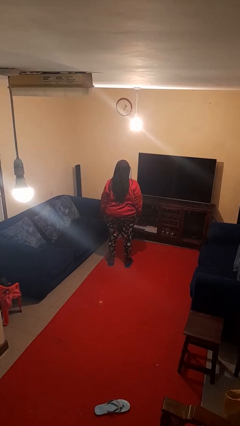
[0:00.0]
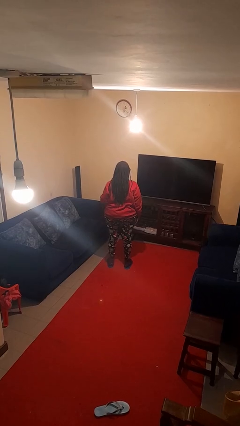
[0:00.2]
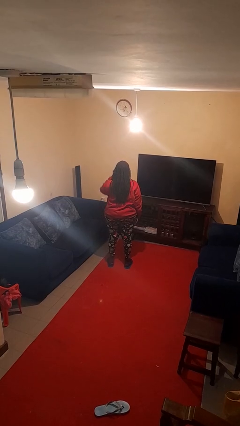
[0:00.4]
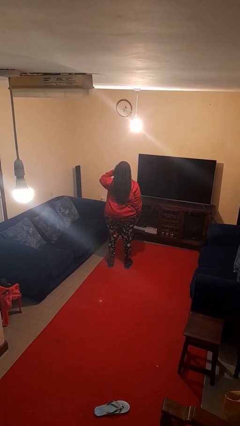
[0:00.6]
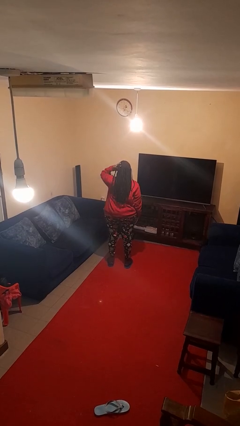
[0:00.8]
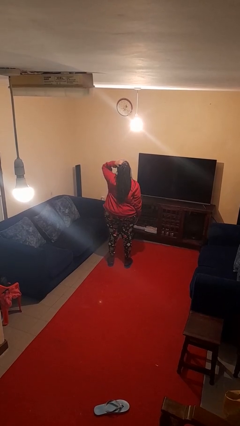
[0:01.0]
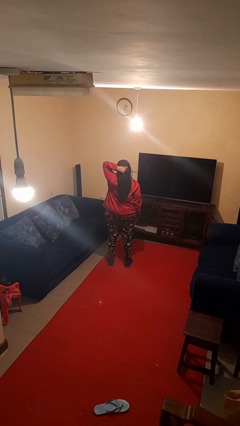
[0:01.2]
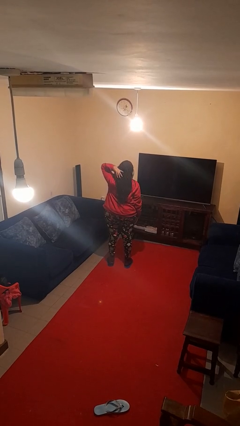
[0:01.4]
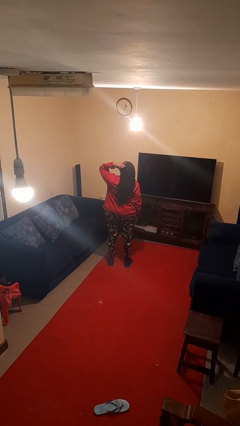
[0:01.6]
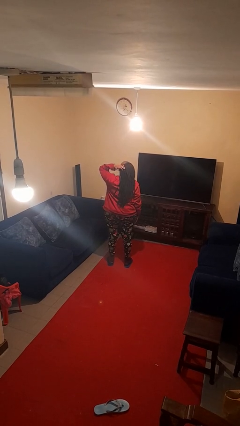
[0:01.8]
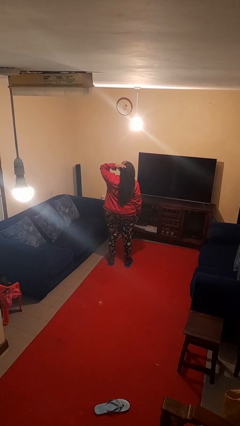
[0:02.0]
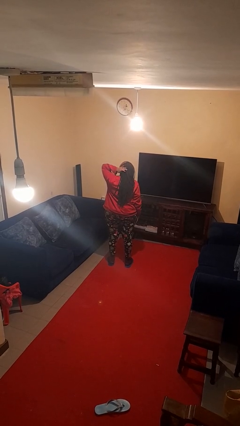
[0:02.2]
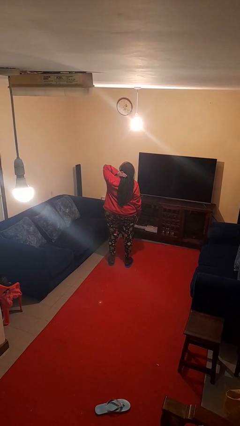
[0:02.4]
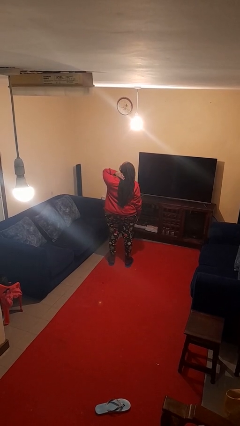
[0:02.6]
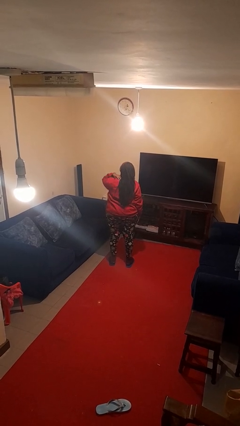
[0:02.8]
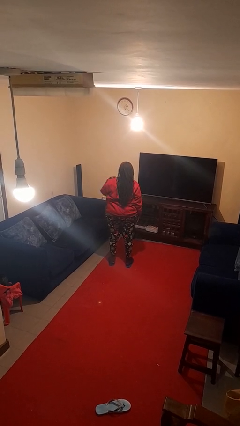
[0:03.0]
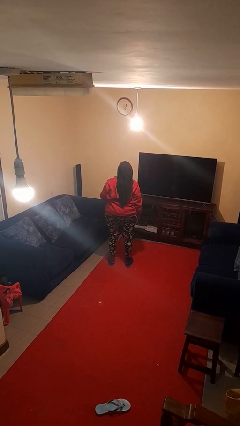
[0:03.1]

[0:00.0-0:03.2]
person strokes hair

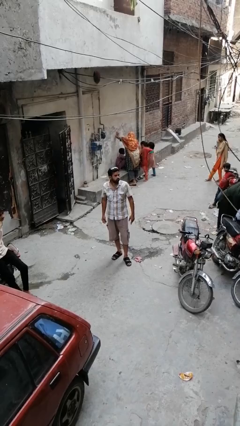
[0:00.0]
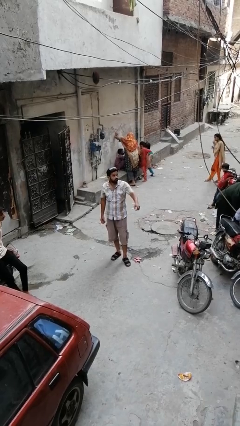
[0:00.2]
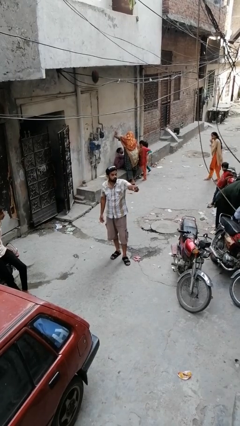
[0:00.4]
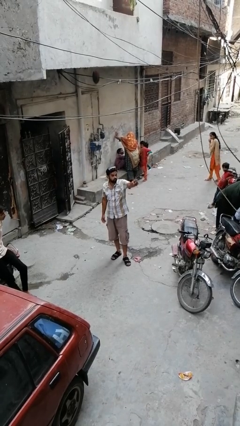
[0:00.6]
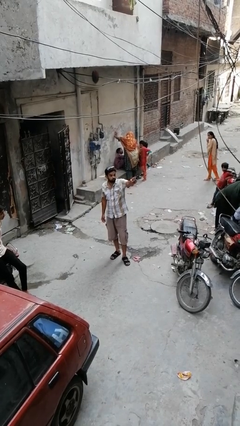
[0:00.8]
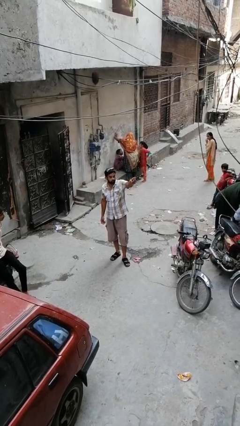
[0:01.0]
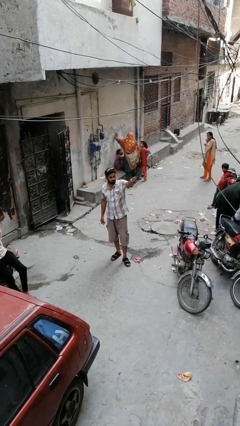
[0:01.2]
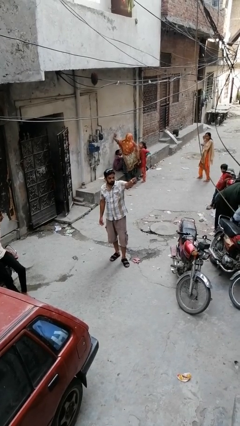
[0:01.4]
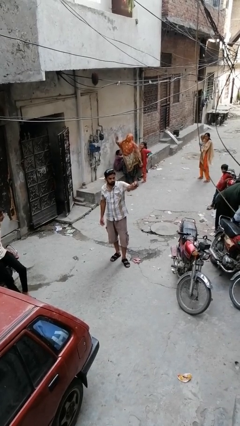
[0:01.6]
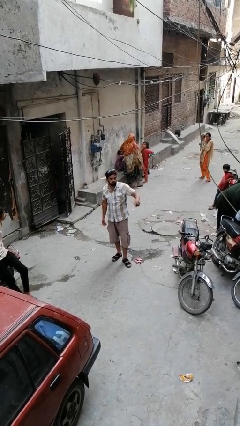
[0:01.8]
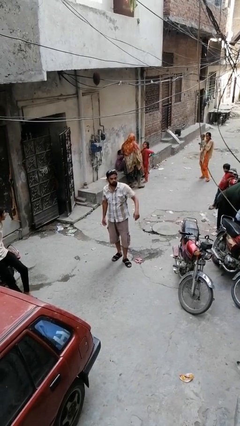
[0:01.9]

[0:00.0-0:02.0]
person points at person

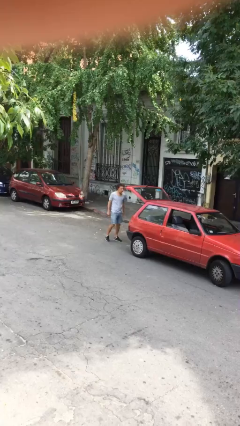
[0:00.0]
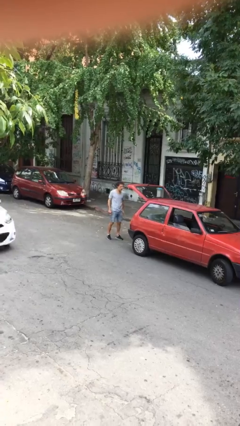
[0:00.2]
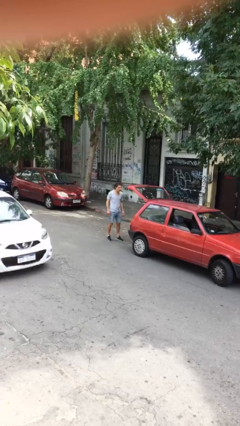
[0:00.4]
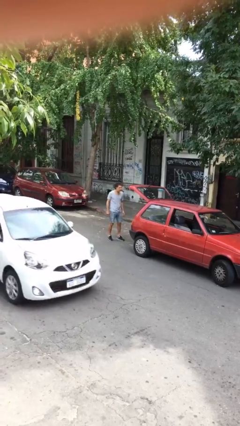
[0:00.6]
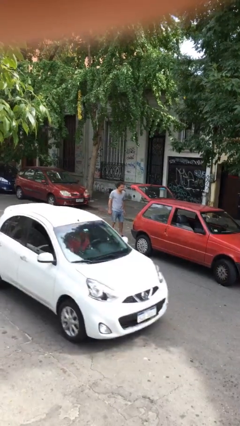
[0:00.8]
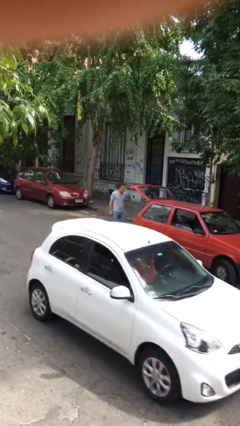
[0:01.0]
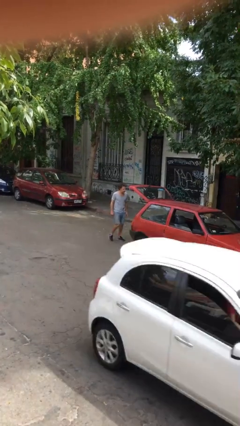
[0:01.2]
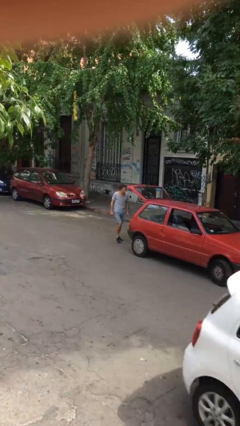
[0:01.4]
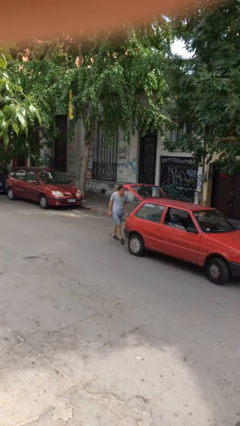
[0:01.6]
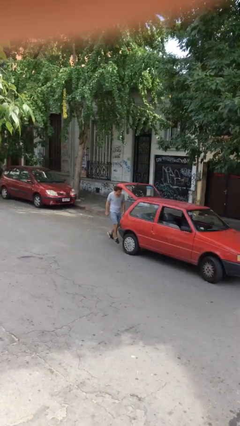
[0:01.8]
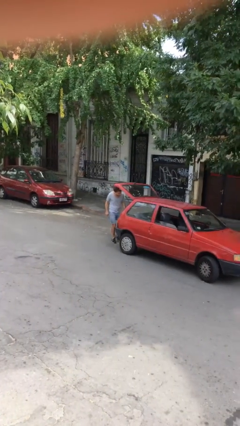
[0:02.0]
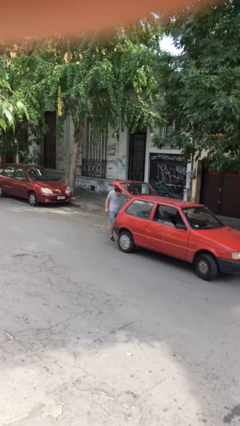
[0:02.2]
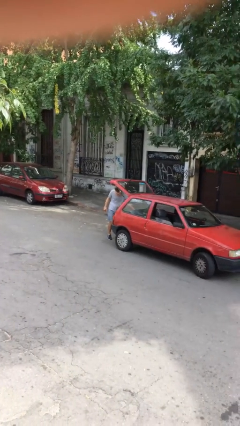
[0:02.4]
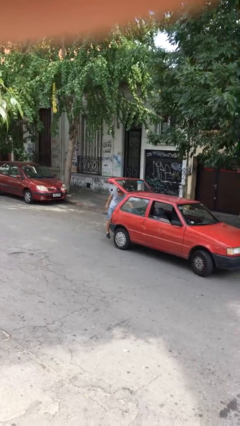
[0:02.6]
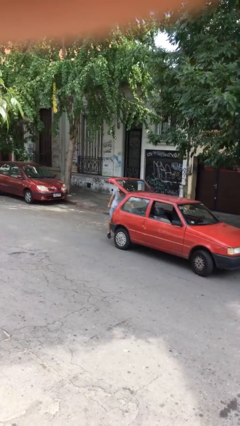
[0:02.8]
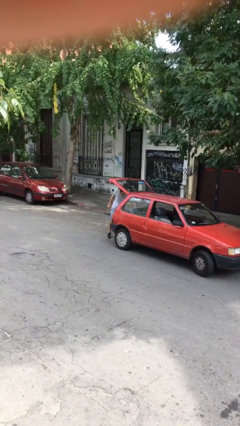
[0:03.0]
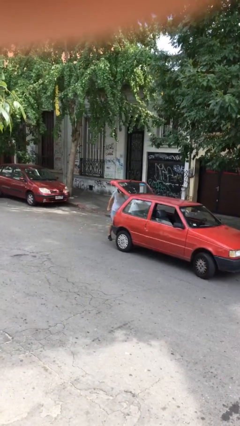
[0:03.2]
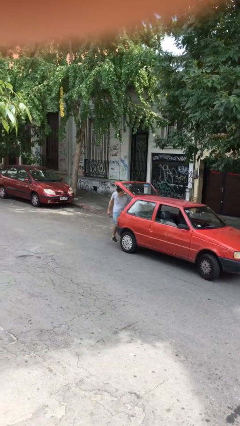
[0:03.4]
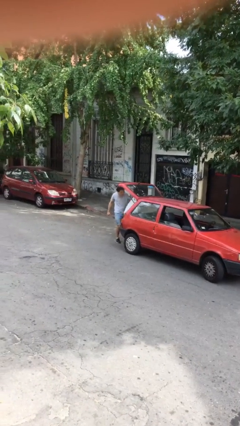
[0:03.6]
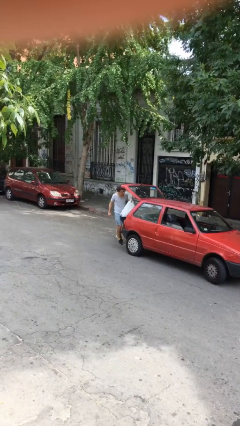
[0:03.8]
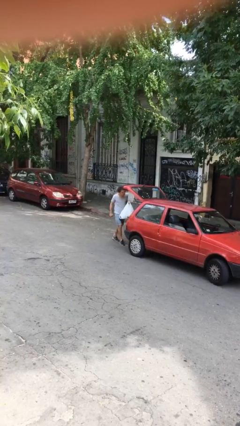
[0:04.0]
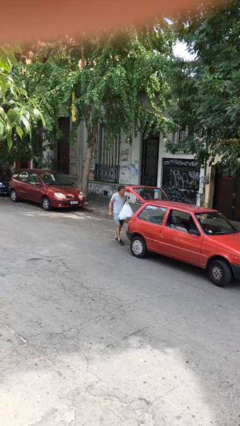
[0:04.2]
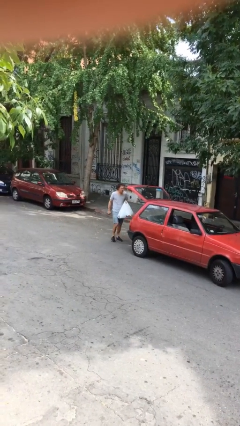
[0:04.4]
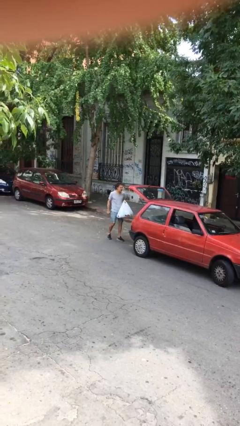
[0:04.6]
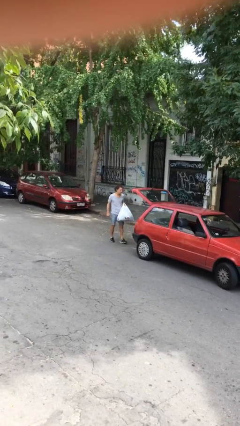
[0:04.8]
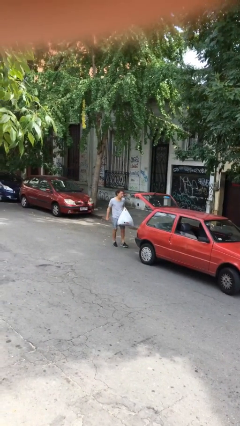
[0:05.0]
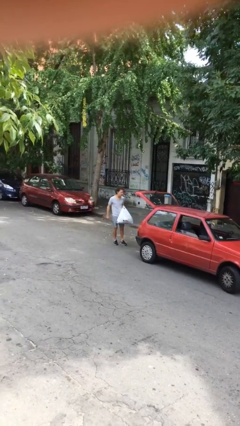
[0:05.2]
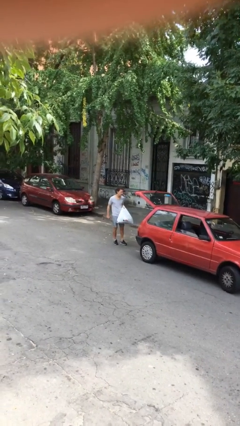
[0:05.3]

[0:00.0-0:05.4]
person unloads car

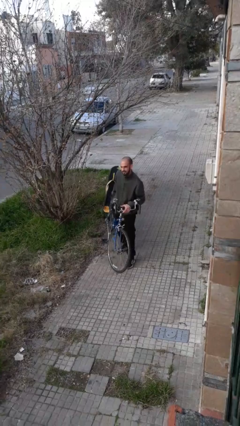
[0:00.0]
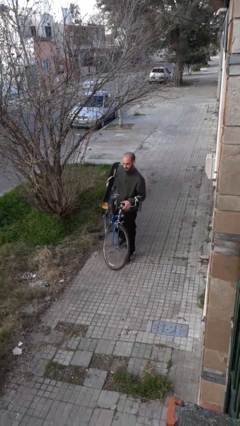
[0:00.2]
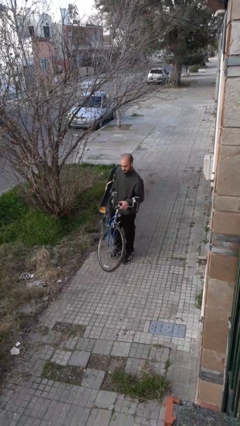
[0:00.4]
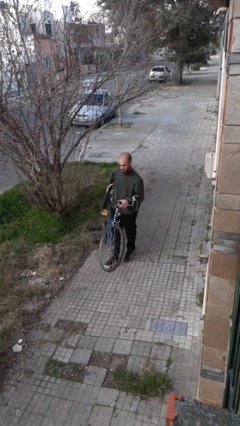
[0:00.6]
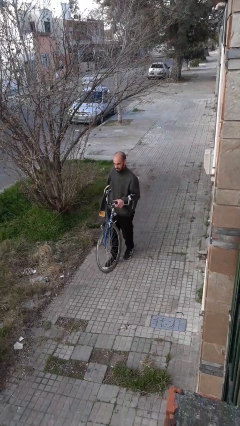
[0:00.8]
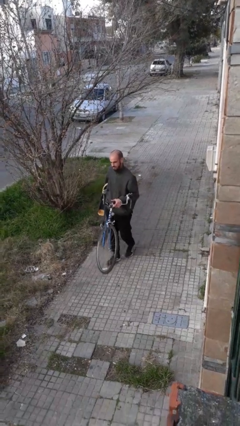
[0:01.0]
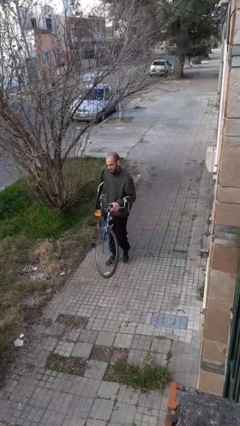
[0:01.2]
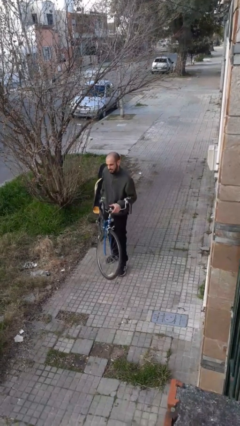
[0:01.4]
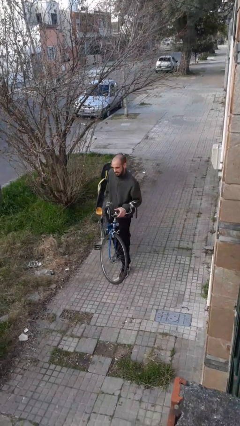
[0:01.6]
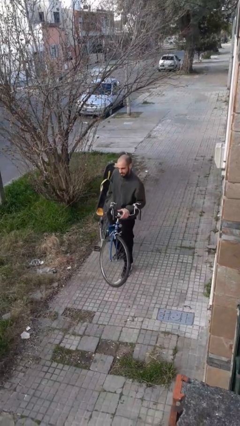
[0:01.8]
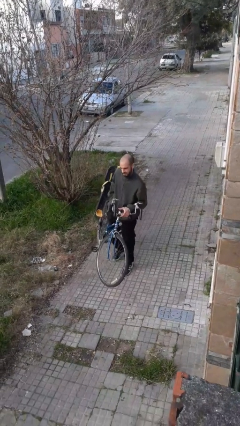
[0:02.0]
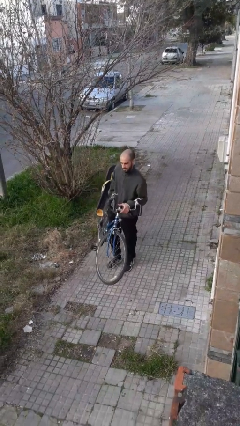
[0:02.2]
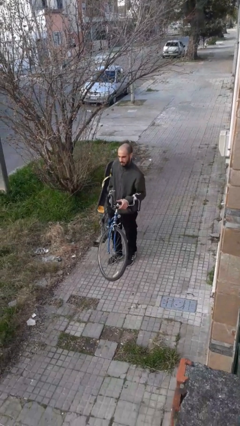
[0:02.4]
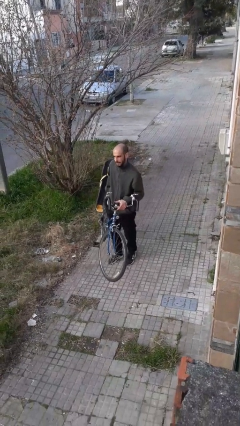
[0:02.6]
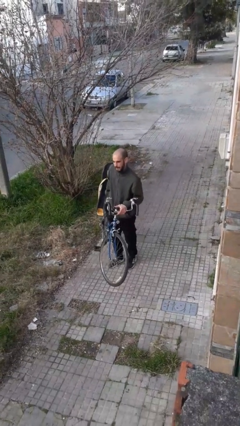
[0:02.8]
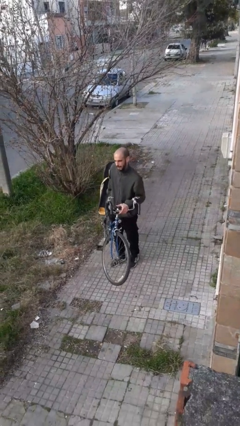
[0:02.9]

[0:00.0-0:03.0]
person carries bicycle

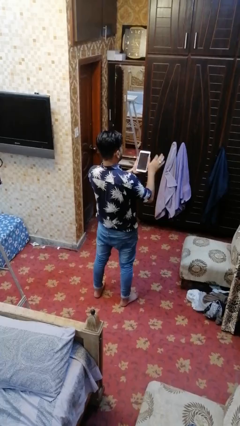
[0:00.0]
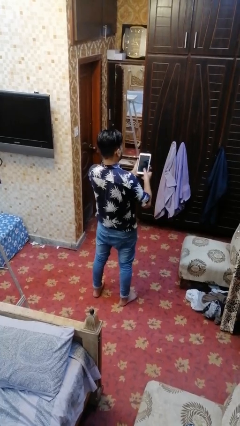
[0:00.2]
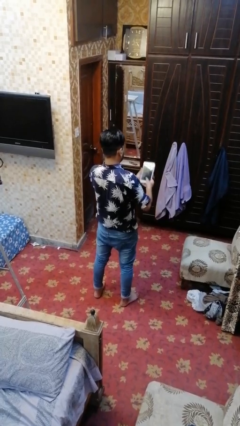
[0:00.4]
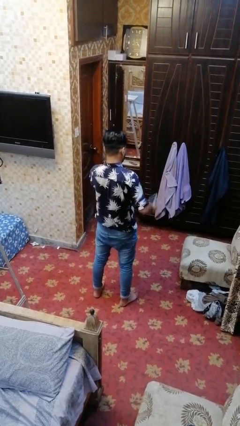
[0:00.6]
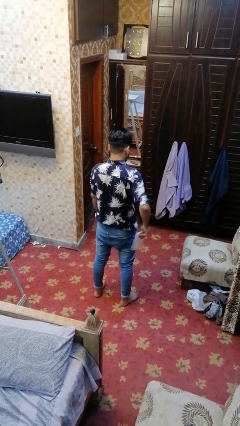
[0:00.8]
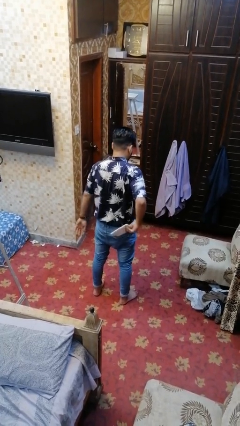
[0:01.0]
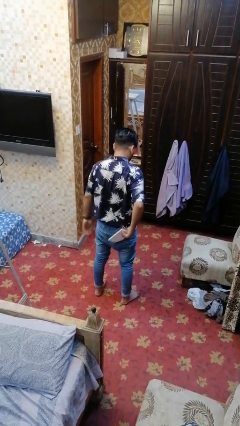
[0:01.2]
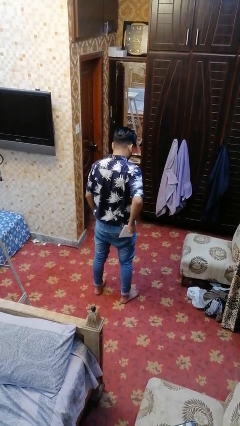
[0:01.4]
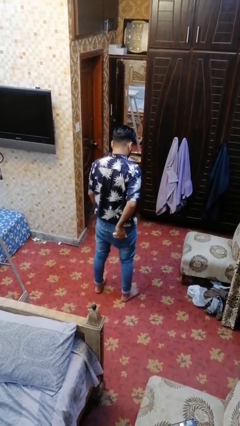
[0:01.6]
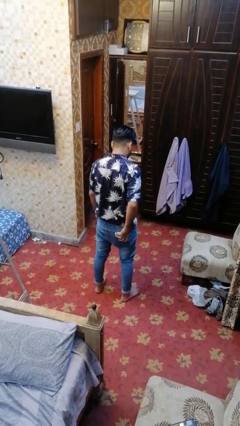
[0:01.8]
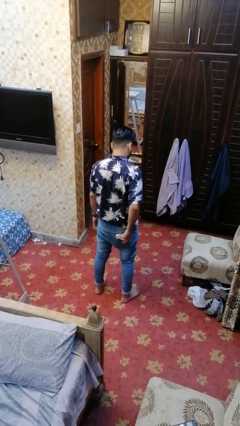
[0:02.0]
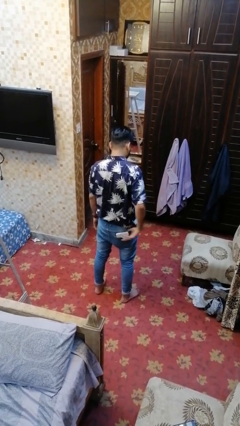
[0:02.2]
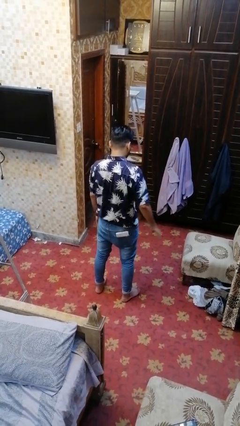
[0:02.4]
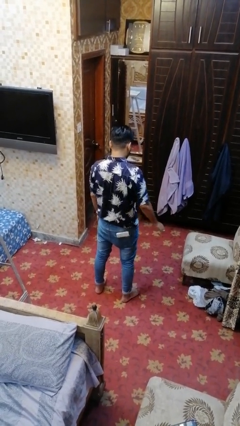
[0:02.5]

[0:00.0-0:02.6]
person puts phone into pocket

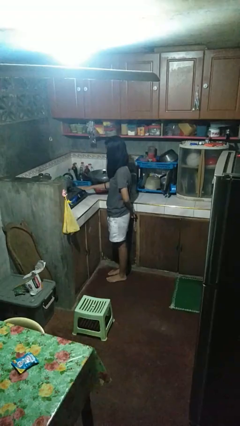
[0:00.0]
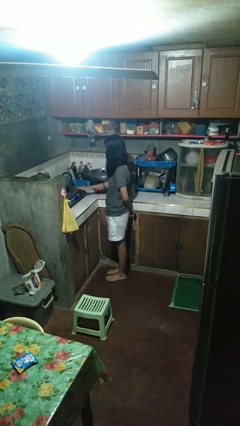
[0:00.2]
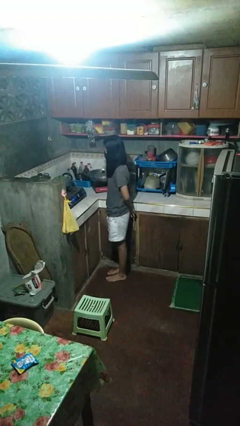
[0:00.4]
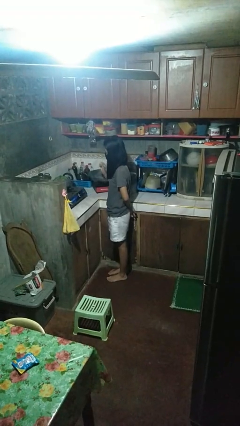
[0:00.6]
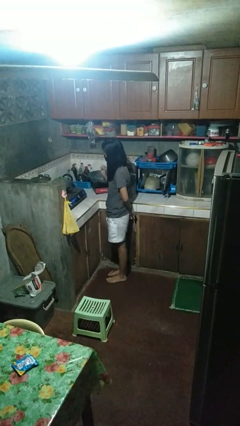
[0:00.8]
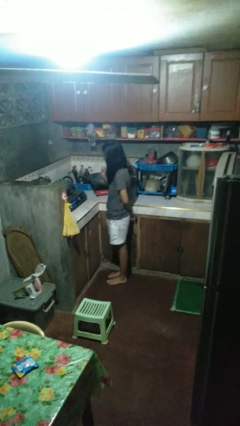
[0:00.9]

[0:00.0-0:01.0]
person burns hand

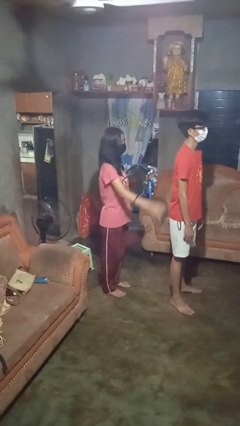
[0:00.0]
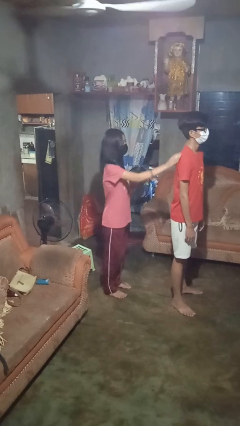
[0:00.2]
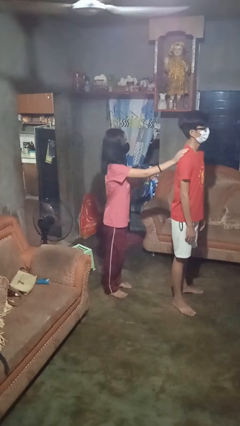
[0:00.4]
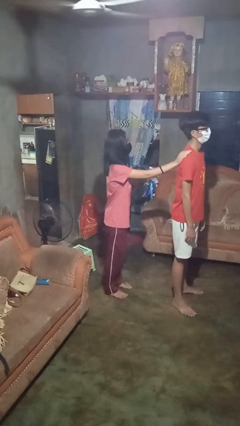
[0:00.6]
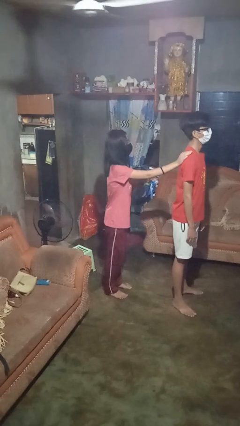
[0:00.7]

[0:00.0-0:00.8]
person touches back of person
